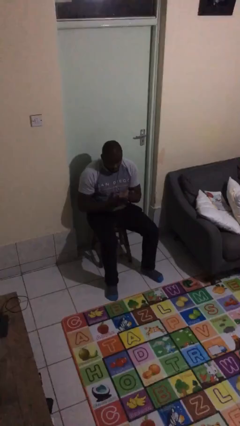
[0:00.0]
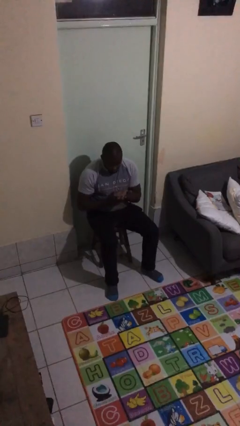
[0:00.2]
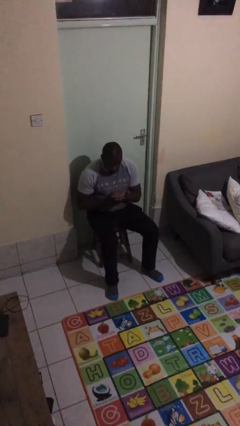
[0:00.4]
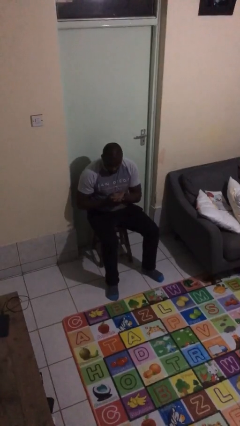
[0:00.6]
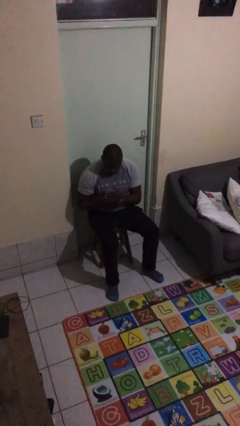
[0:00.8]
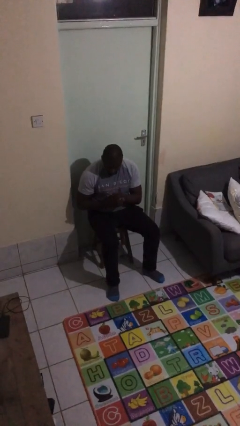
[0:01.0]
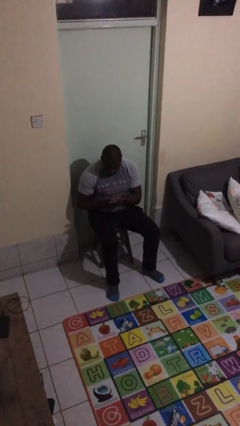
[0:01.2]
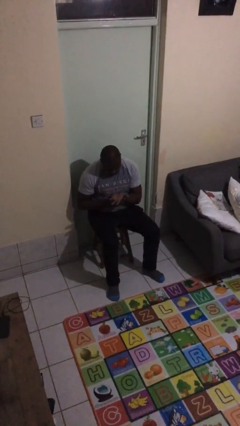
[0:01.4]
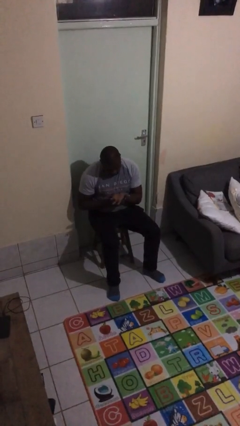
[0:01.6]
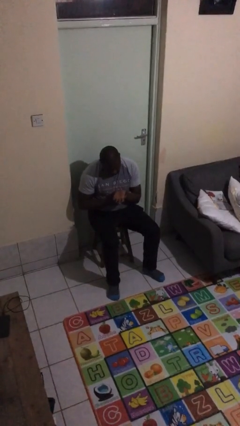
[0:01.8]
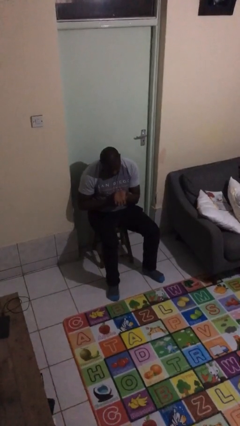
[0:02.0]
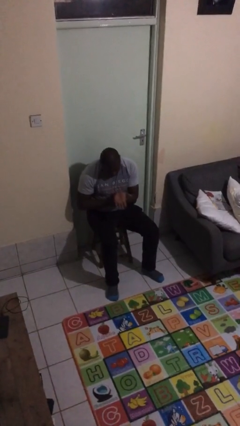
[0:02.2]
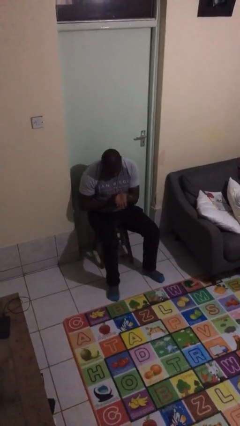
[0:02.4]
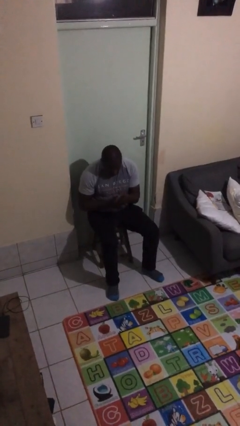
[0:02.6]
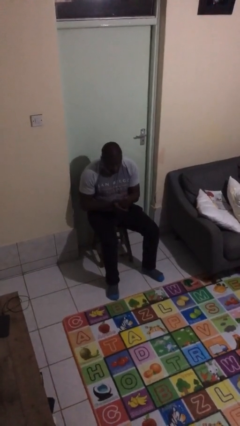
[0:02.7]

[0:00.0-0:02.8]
person looks at hands in lap

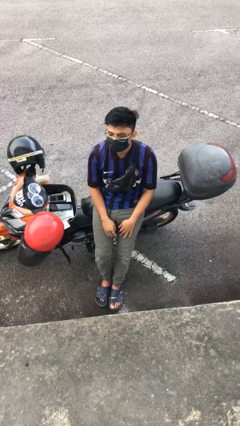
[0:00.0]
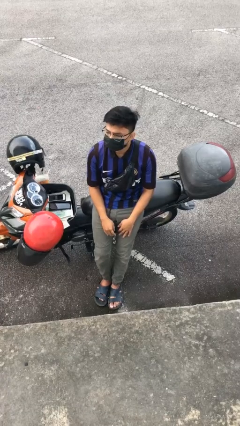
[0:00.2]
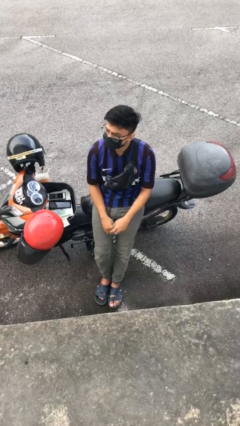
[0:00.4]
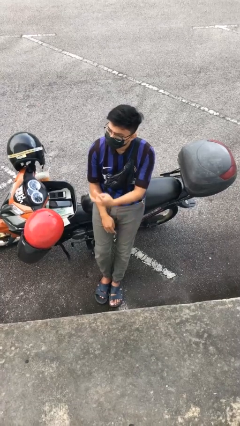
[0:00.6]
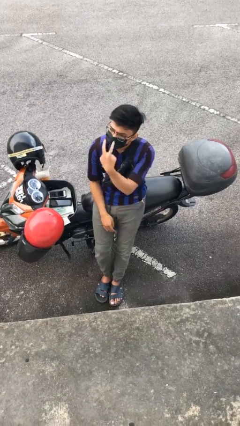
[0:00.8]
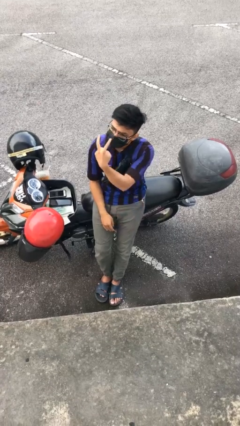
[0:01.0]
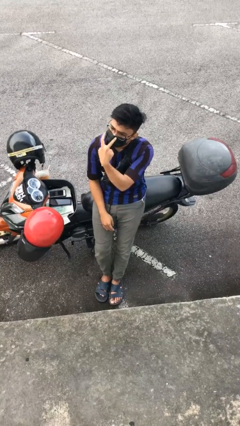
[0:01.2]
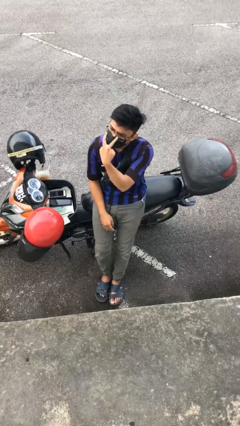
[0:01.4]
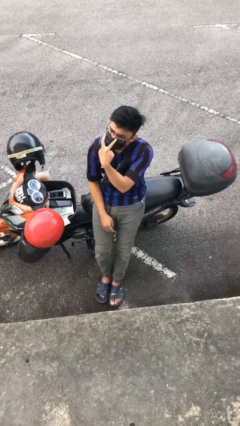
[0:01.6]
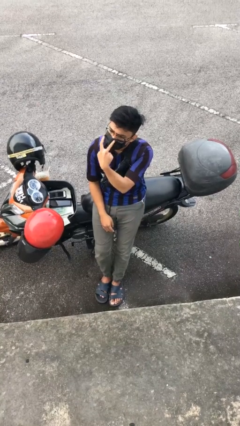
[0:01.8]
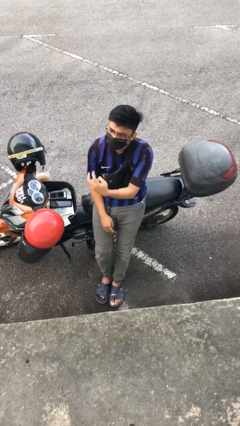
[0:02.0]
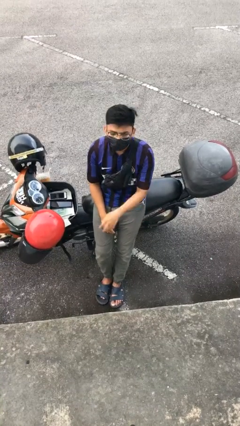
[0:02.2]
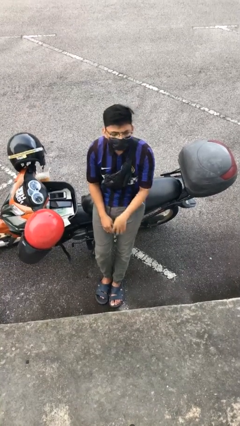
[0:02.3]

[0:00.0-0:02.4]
person gestures watch closely

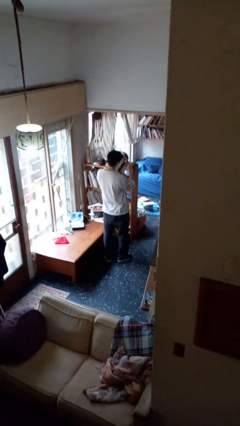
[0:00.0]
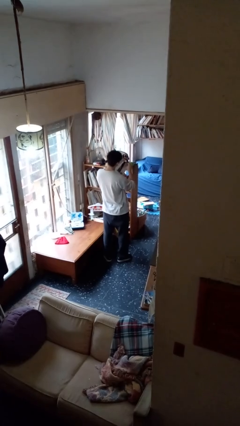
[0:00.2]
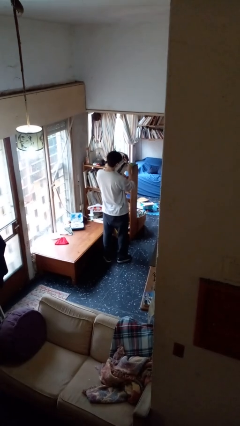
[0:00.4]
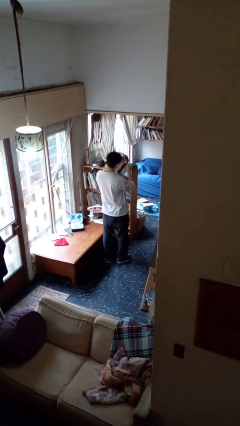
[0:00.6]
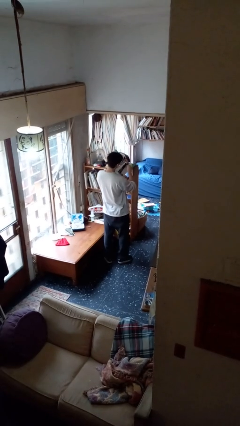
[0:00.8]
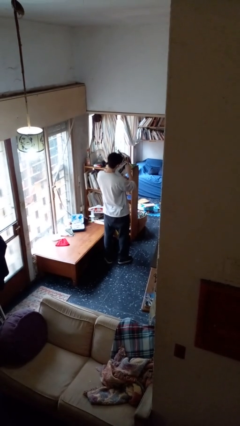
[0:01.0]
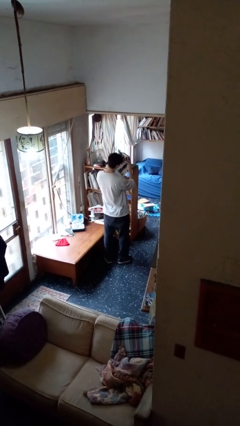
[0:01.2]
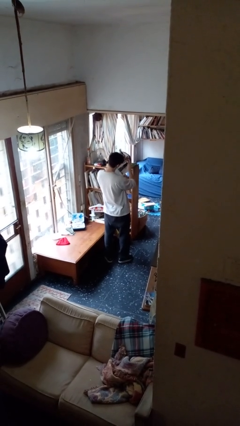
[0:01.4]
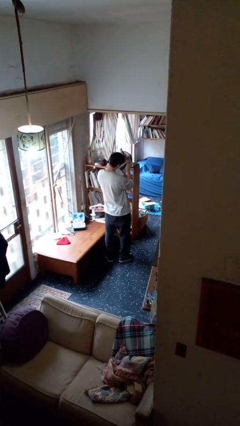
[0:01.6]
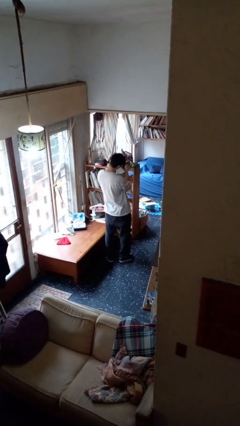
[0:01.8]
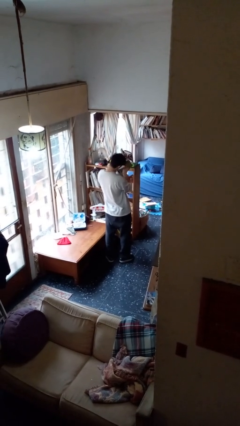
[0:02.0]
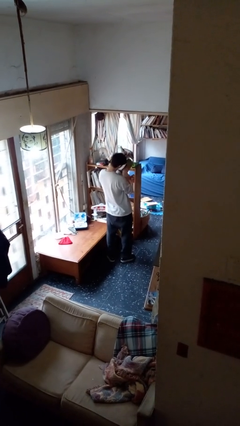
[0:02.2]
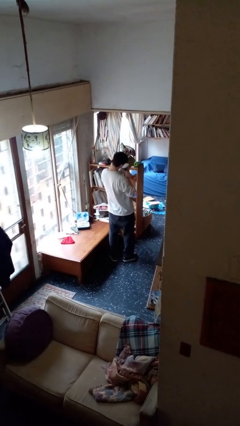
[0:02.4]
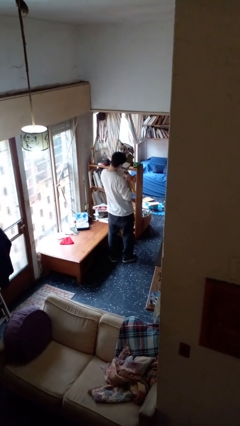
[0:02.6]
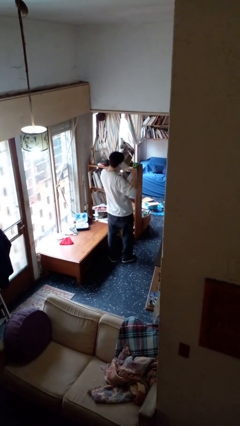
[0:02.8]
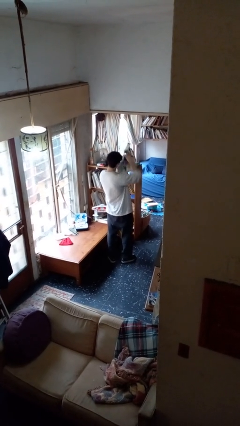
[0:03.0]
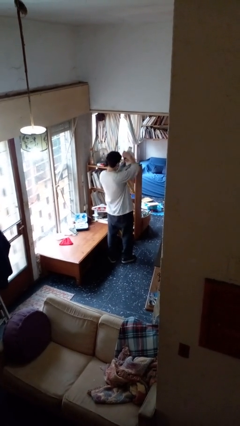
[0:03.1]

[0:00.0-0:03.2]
person tears paper

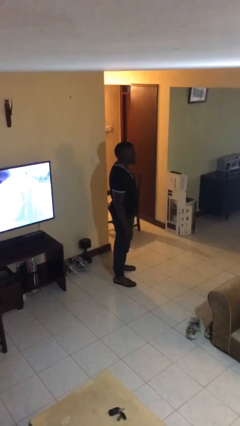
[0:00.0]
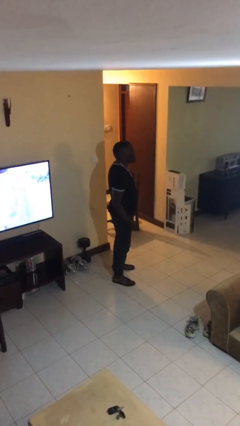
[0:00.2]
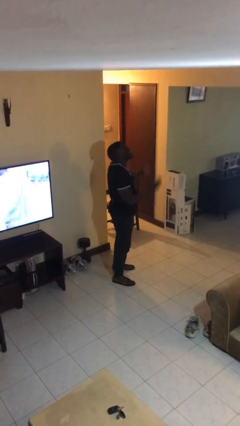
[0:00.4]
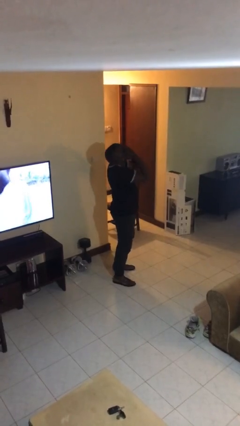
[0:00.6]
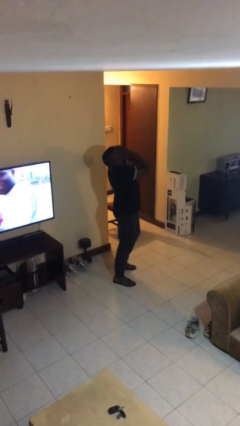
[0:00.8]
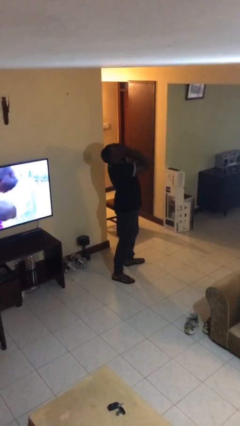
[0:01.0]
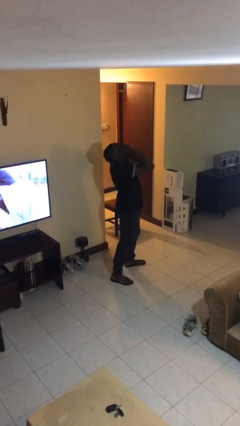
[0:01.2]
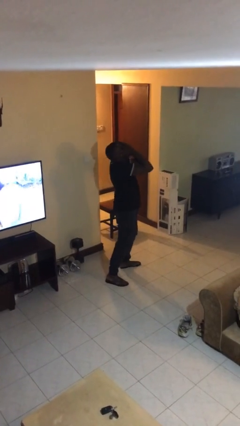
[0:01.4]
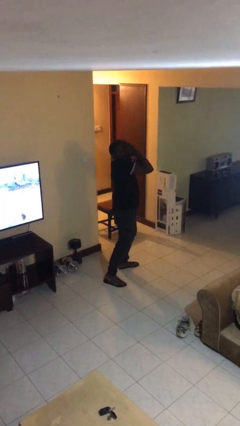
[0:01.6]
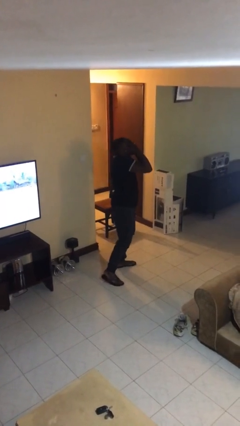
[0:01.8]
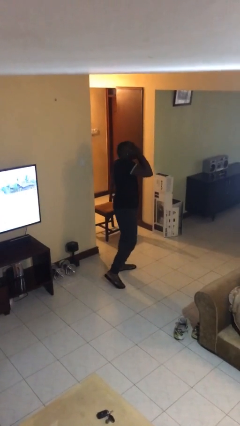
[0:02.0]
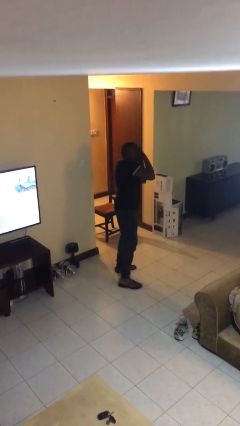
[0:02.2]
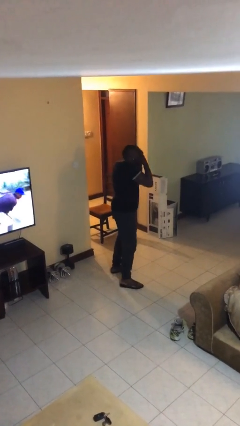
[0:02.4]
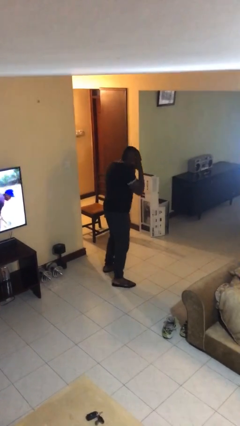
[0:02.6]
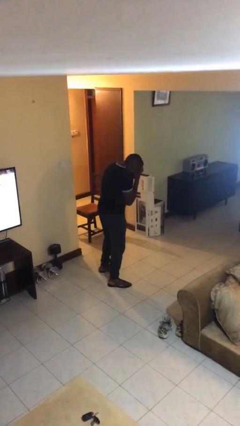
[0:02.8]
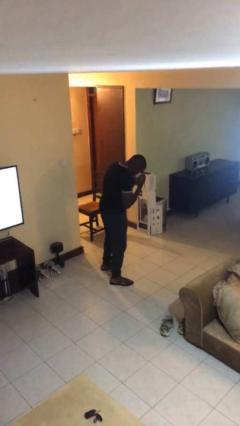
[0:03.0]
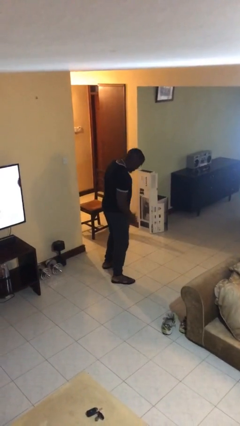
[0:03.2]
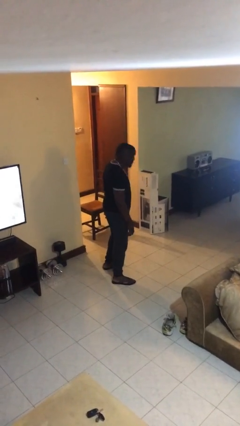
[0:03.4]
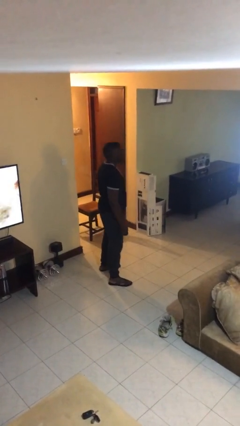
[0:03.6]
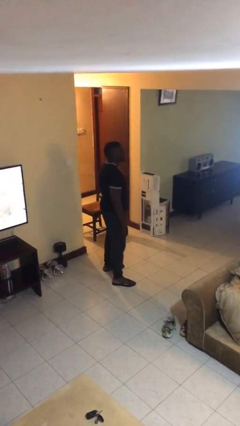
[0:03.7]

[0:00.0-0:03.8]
person covers face with hands

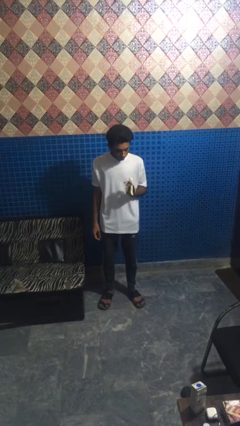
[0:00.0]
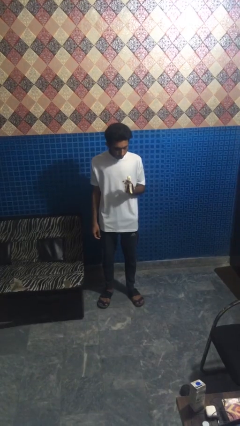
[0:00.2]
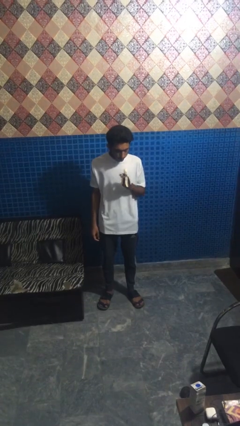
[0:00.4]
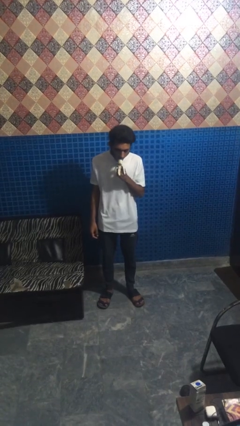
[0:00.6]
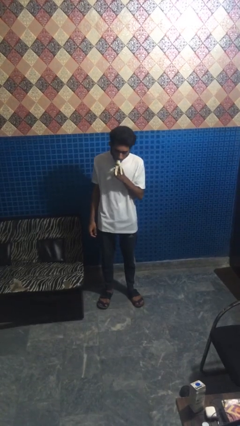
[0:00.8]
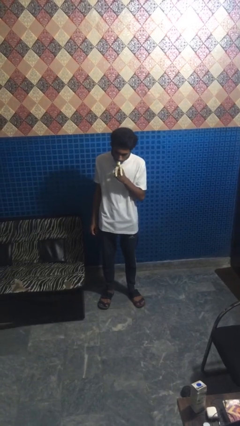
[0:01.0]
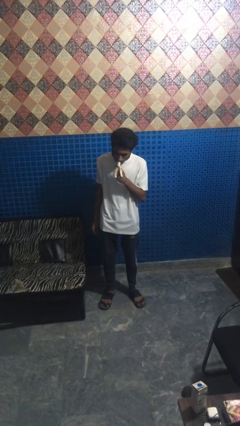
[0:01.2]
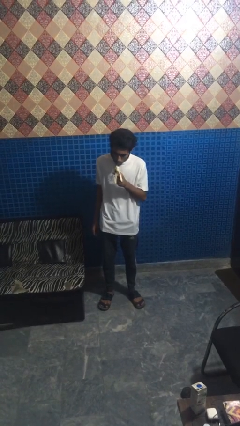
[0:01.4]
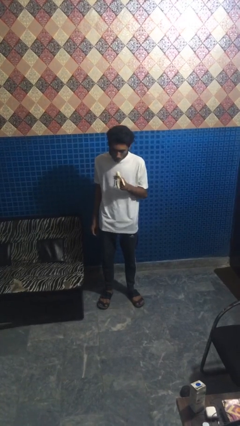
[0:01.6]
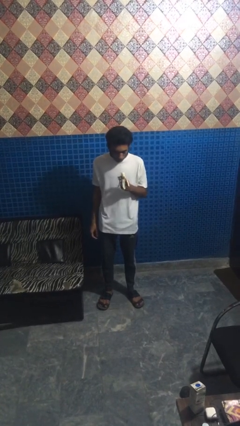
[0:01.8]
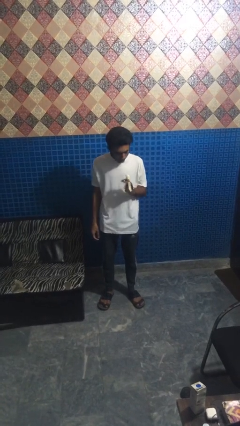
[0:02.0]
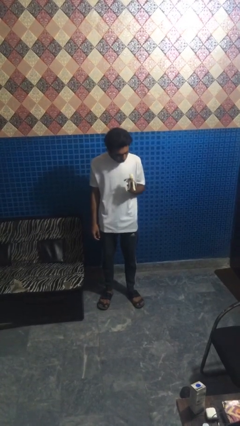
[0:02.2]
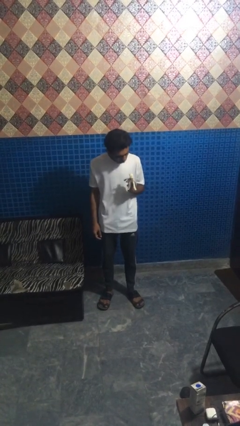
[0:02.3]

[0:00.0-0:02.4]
person eats banana

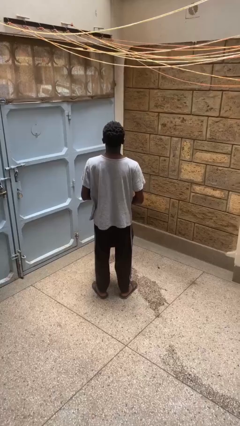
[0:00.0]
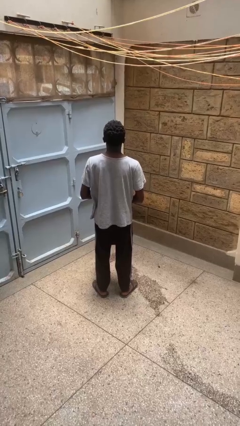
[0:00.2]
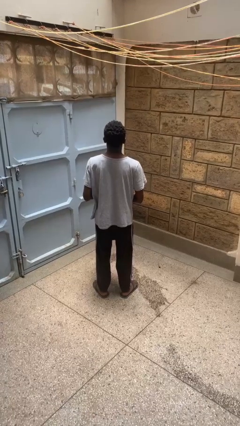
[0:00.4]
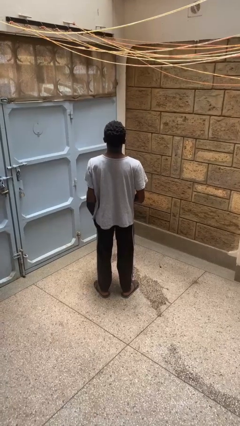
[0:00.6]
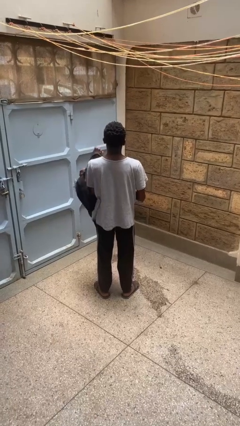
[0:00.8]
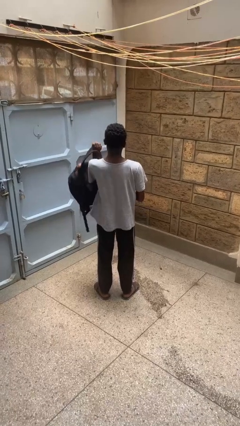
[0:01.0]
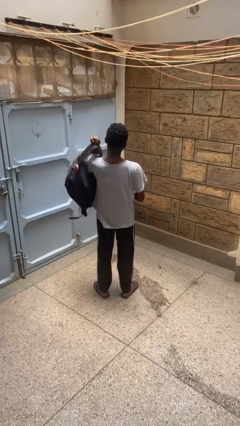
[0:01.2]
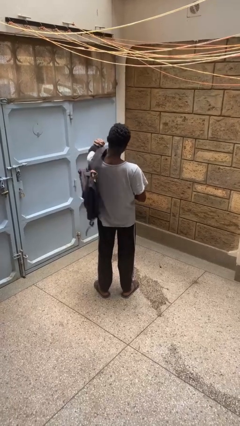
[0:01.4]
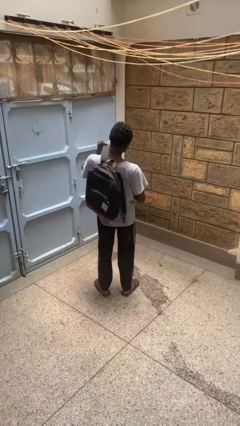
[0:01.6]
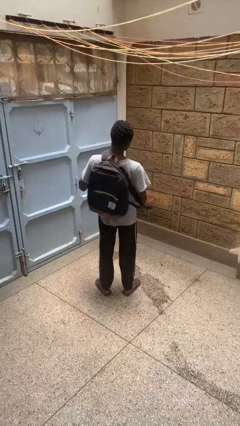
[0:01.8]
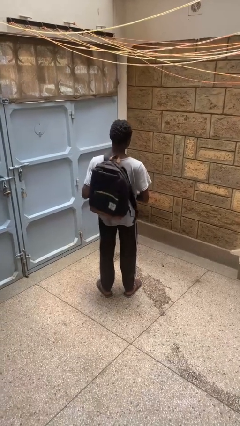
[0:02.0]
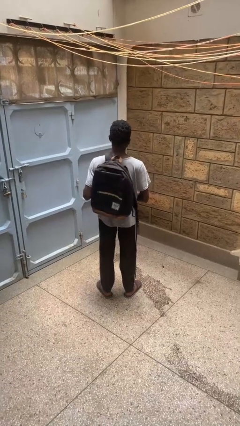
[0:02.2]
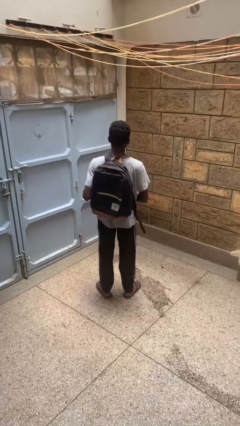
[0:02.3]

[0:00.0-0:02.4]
person puts on backpack

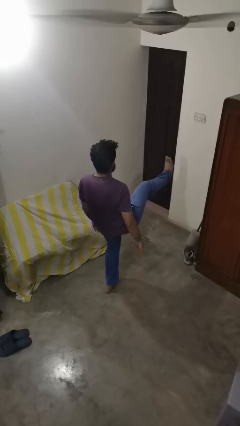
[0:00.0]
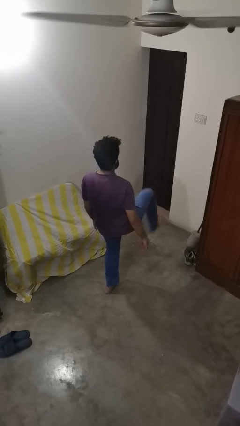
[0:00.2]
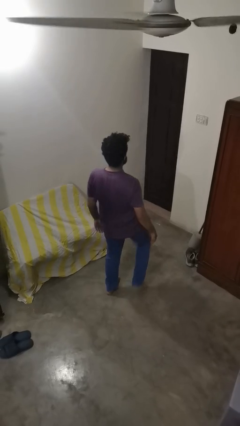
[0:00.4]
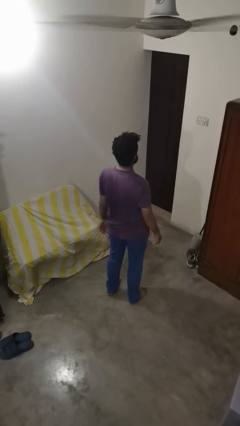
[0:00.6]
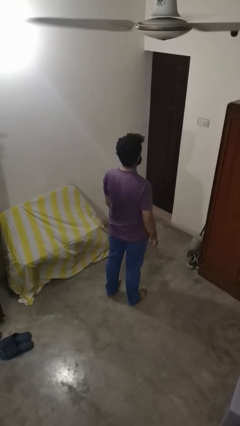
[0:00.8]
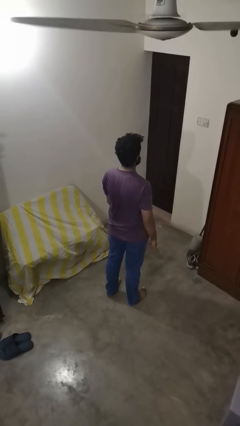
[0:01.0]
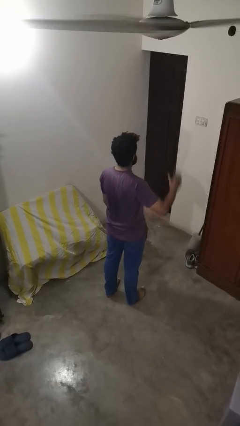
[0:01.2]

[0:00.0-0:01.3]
person karate kicks
